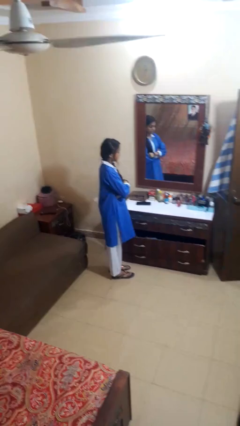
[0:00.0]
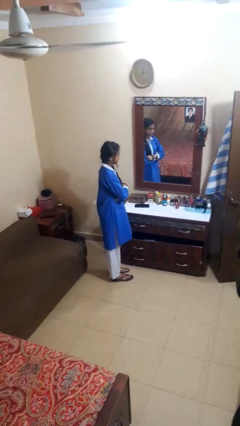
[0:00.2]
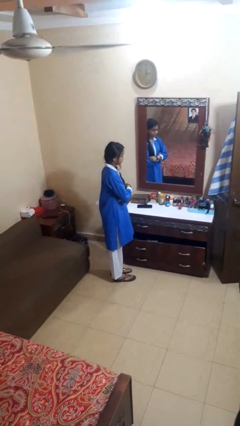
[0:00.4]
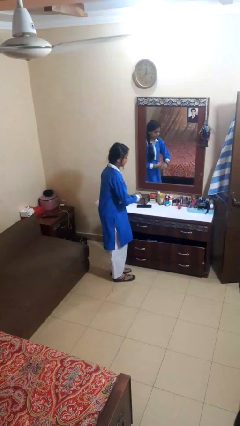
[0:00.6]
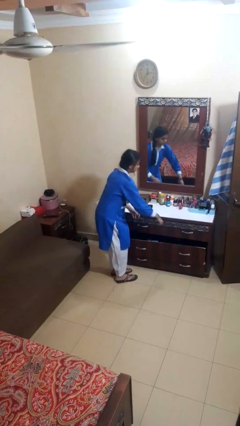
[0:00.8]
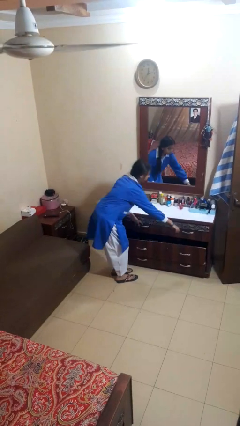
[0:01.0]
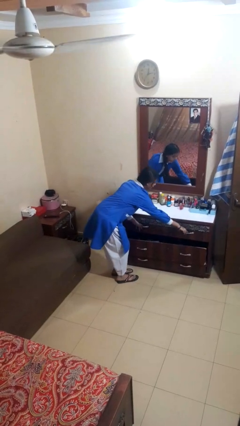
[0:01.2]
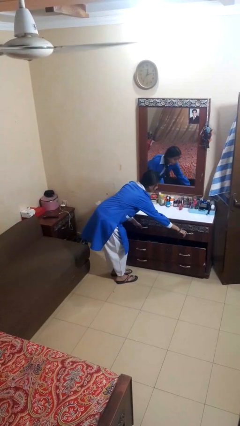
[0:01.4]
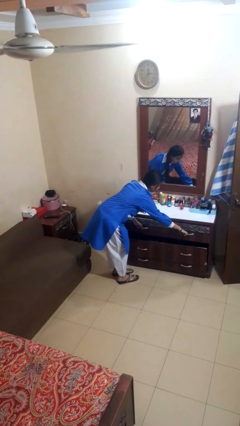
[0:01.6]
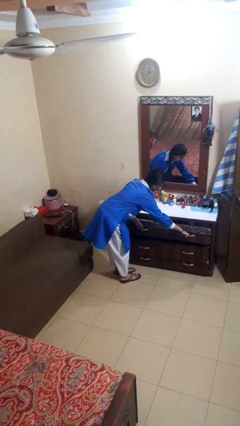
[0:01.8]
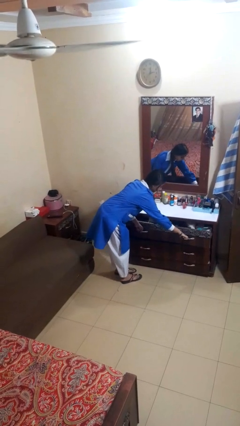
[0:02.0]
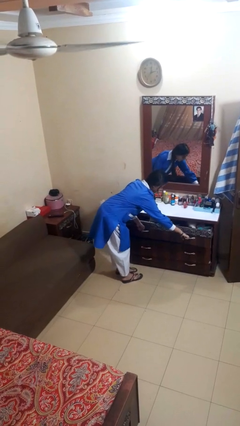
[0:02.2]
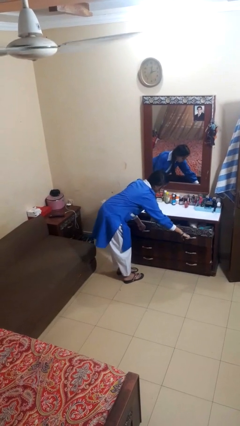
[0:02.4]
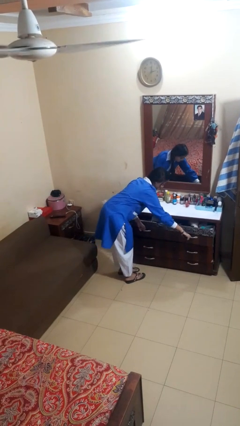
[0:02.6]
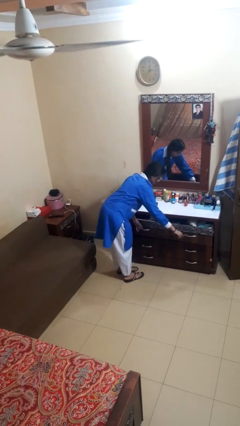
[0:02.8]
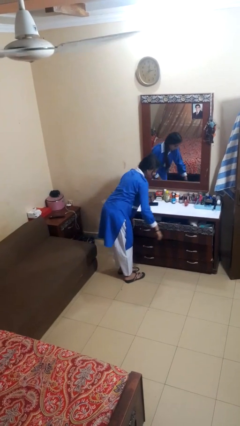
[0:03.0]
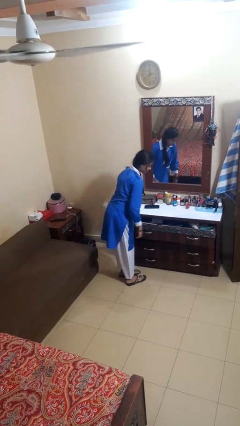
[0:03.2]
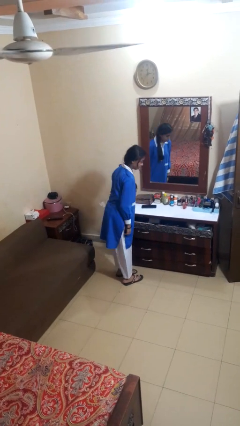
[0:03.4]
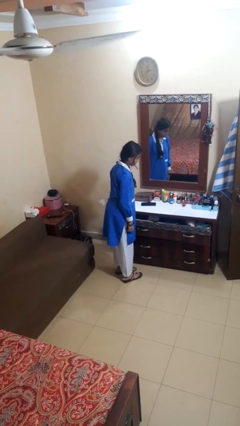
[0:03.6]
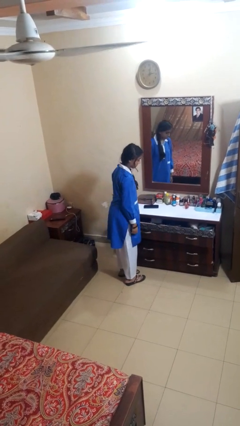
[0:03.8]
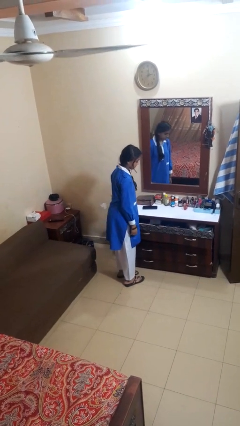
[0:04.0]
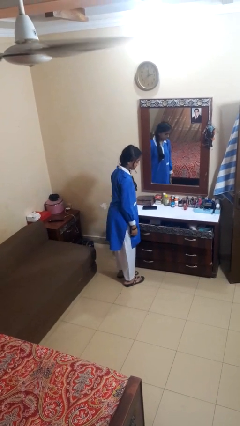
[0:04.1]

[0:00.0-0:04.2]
person opens dresser drawer

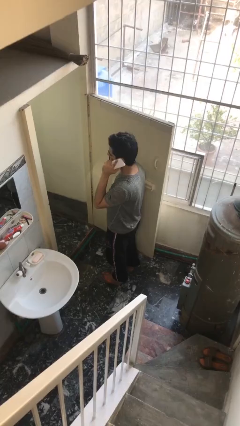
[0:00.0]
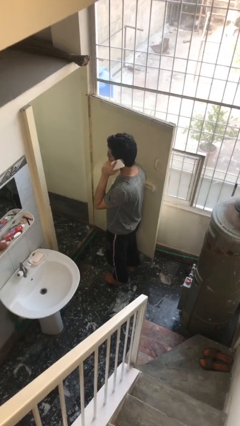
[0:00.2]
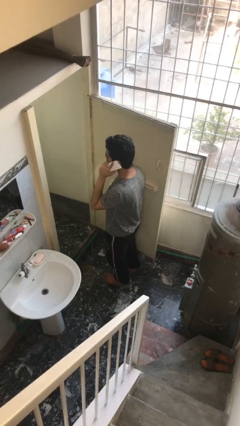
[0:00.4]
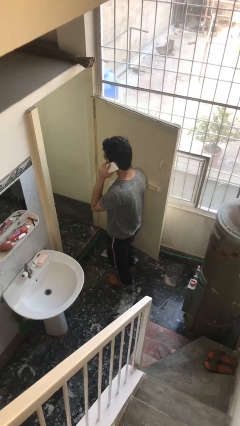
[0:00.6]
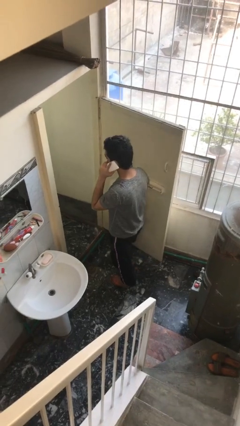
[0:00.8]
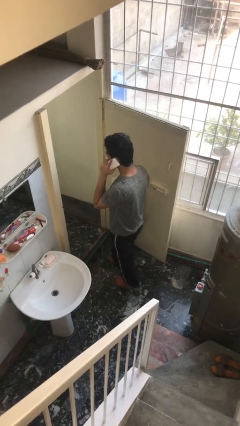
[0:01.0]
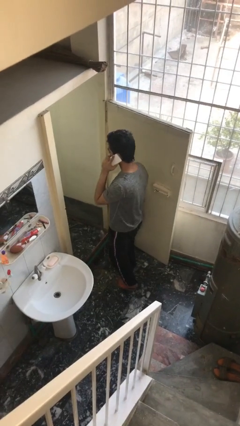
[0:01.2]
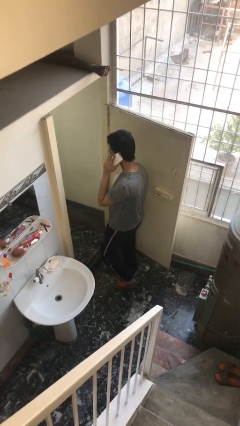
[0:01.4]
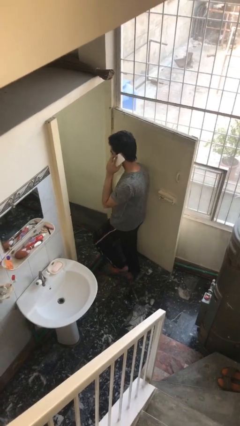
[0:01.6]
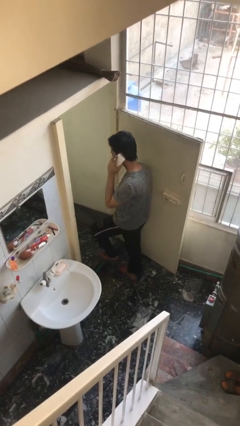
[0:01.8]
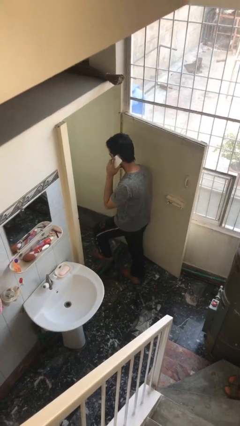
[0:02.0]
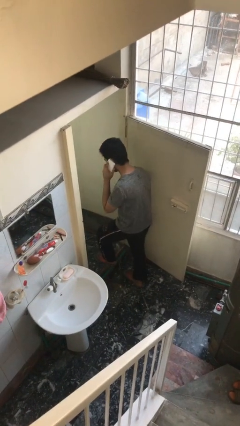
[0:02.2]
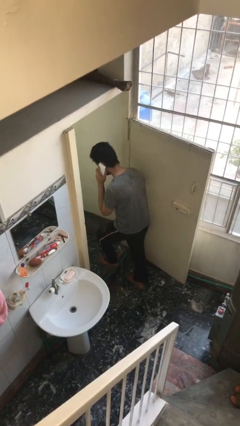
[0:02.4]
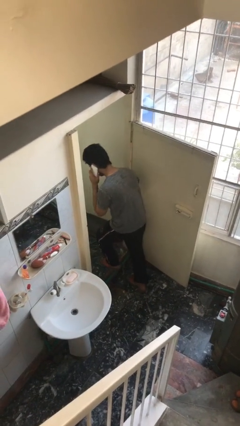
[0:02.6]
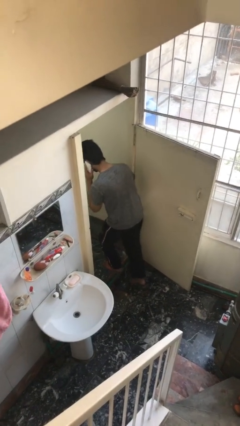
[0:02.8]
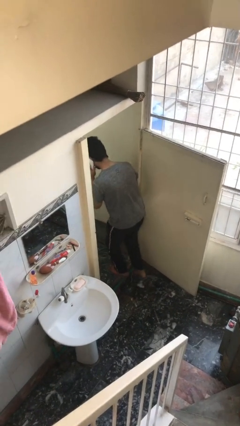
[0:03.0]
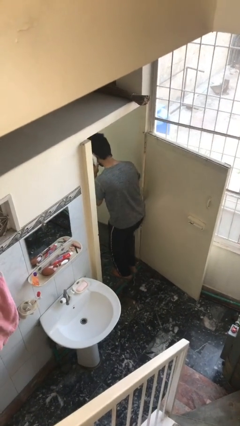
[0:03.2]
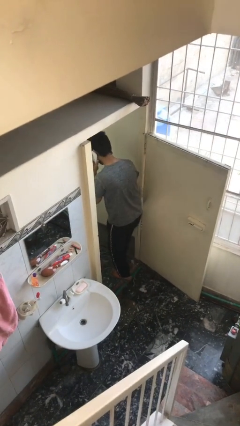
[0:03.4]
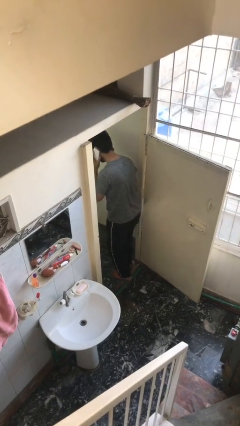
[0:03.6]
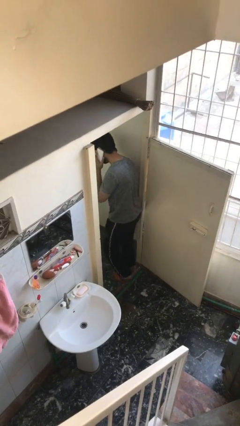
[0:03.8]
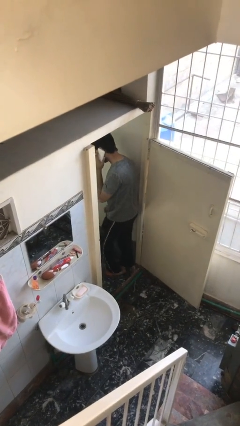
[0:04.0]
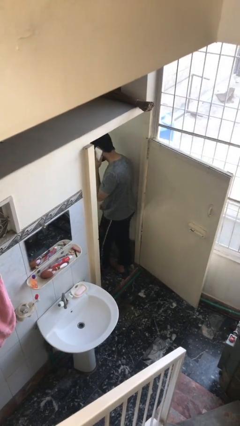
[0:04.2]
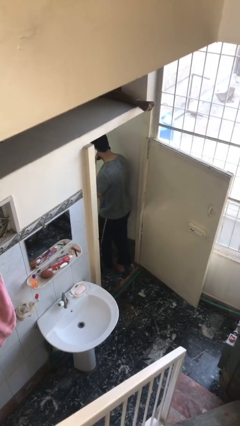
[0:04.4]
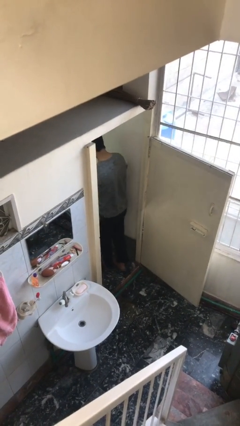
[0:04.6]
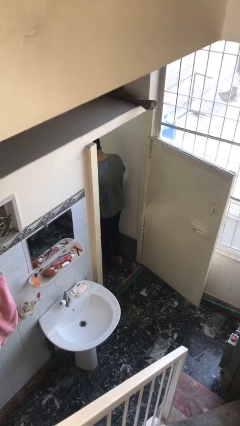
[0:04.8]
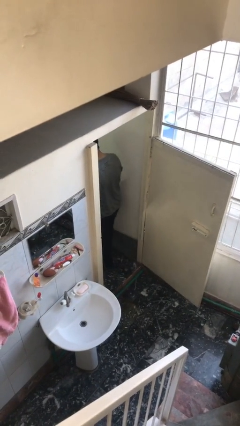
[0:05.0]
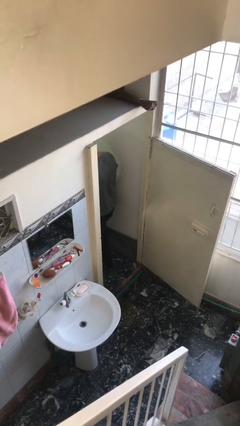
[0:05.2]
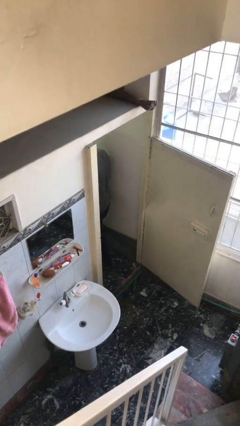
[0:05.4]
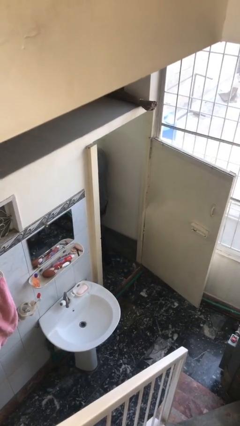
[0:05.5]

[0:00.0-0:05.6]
person exits scene through structure

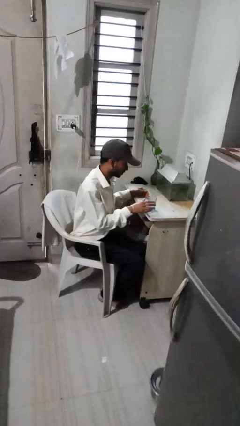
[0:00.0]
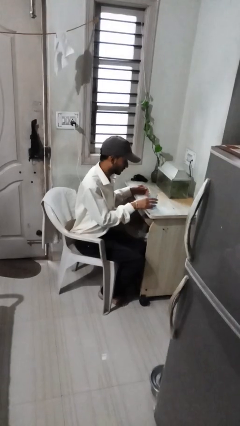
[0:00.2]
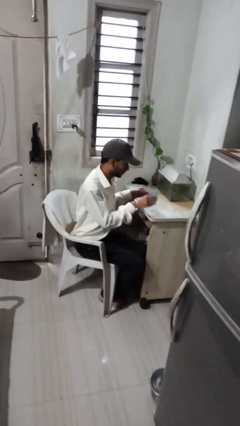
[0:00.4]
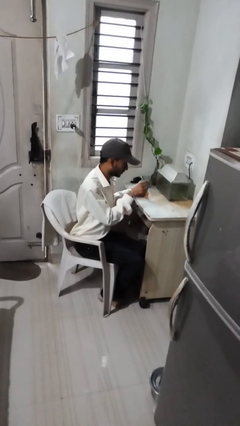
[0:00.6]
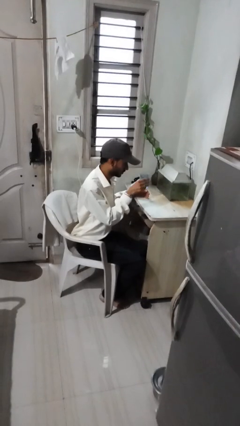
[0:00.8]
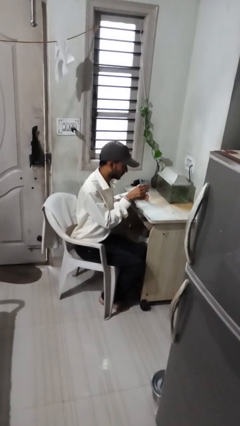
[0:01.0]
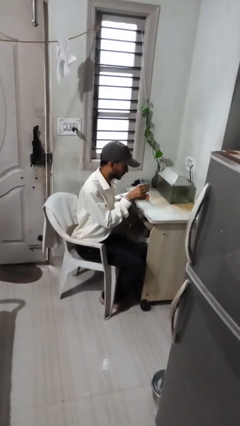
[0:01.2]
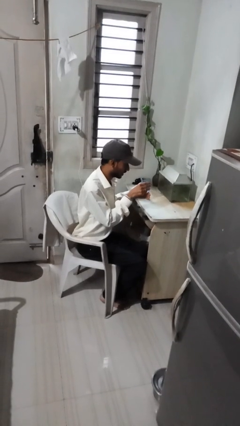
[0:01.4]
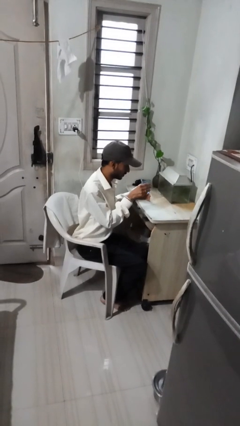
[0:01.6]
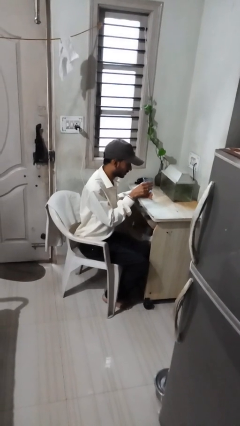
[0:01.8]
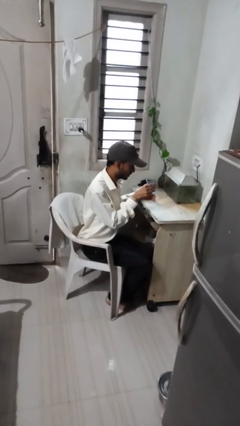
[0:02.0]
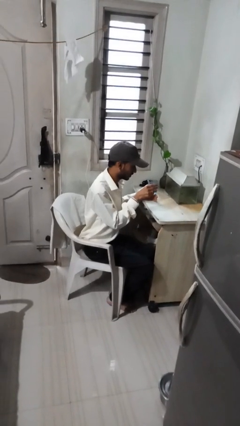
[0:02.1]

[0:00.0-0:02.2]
person picks up object from table

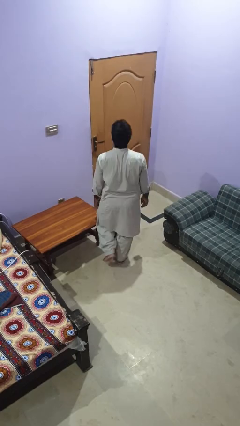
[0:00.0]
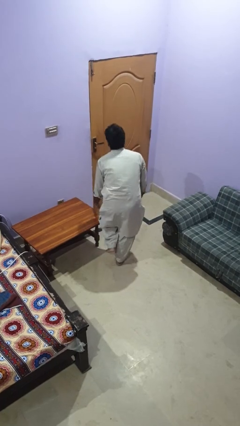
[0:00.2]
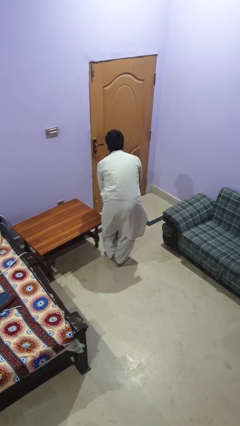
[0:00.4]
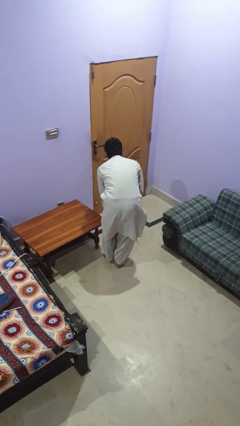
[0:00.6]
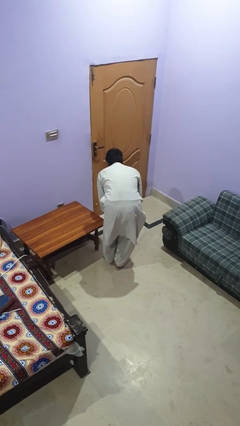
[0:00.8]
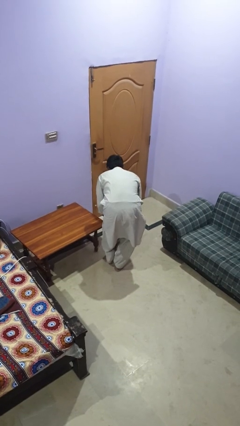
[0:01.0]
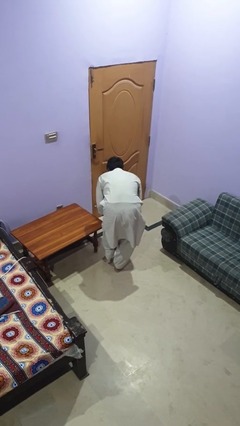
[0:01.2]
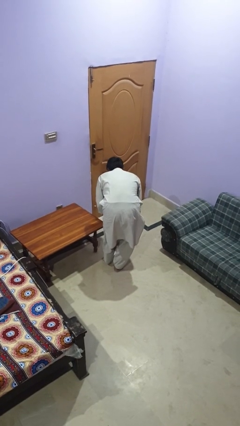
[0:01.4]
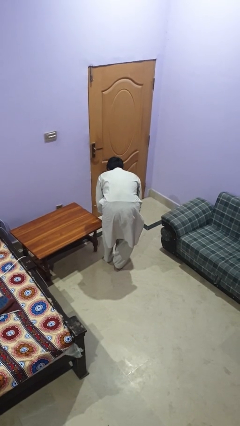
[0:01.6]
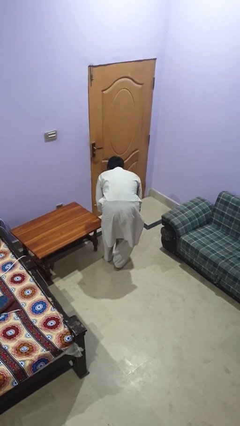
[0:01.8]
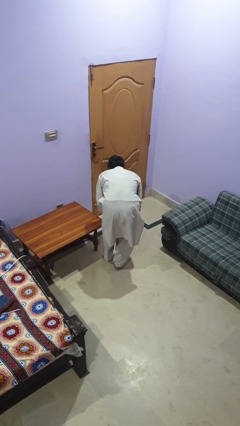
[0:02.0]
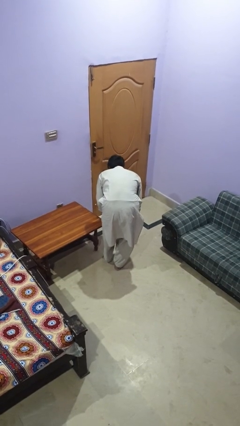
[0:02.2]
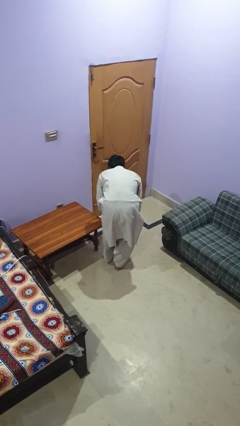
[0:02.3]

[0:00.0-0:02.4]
person bumps into table

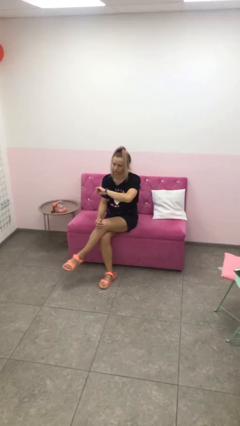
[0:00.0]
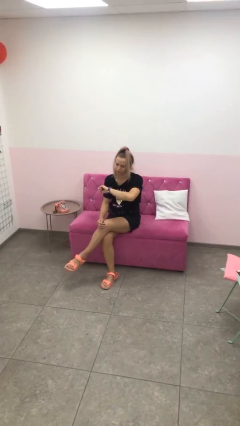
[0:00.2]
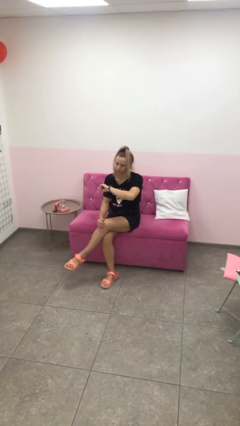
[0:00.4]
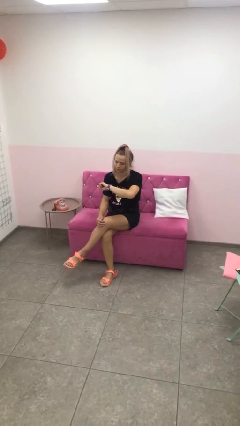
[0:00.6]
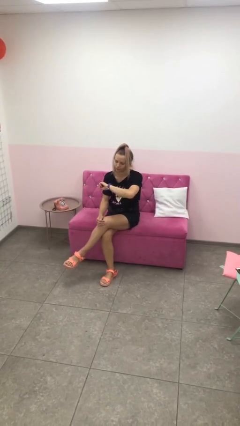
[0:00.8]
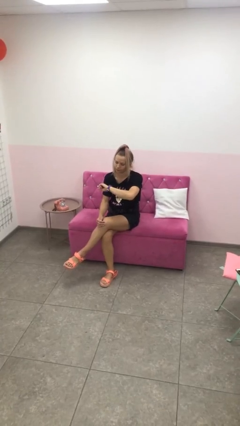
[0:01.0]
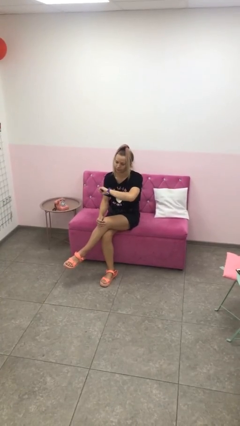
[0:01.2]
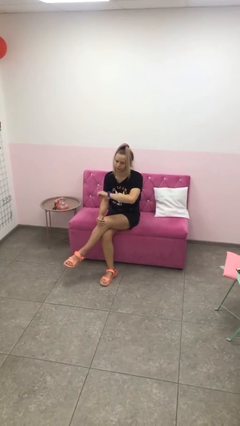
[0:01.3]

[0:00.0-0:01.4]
person looks at wristwatch

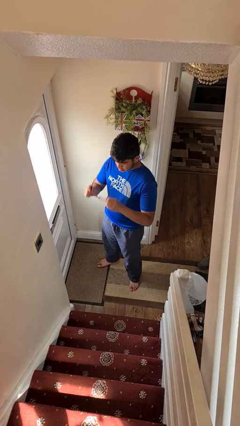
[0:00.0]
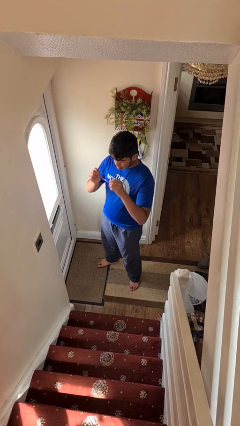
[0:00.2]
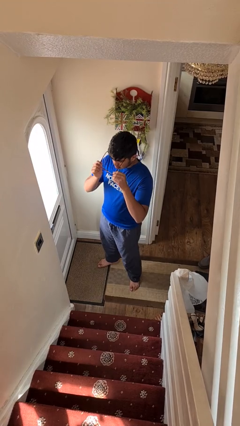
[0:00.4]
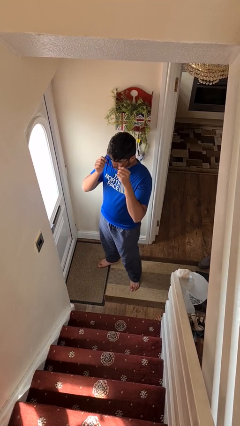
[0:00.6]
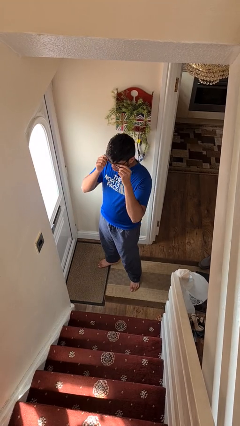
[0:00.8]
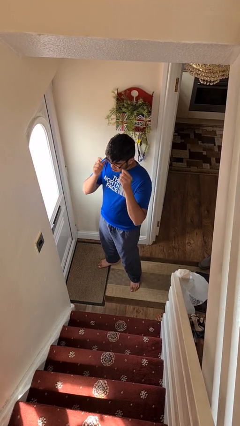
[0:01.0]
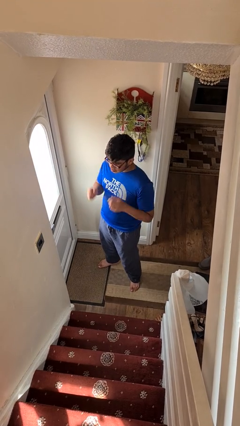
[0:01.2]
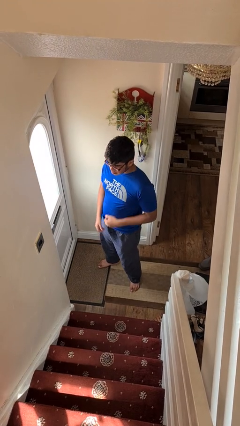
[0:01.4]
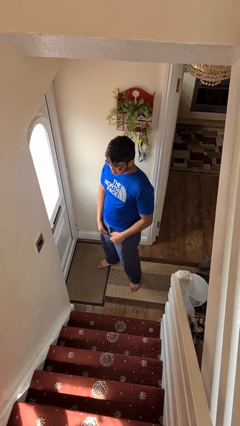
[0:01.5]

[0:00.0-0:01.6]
person puts on glasses
